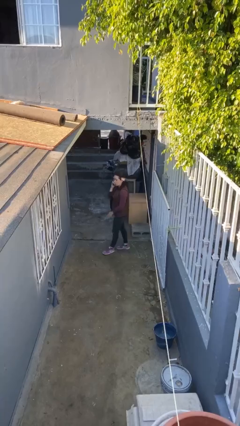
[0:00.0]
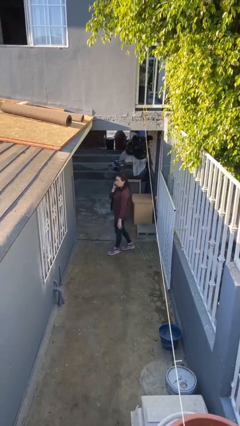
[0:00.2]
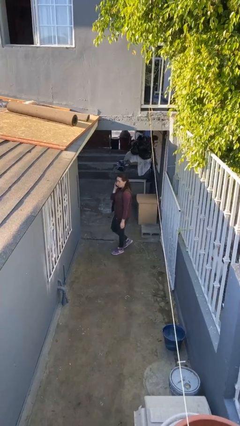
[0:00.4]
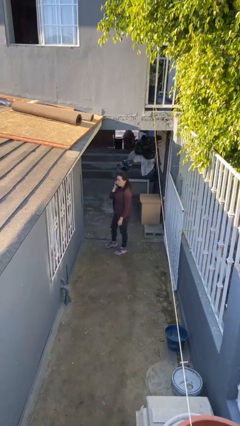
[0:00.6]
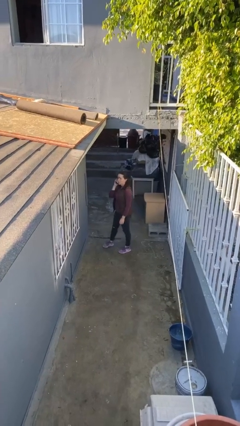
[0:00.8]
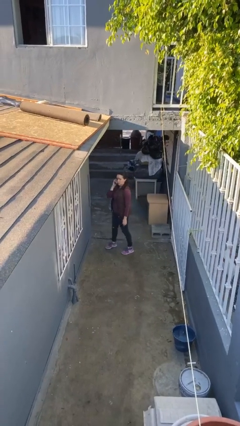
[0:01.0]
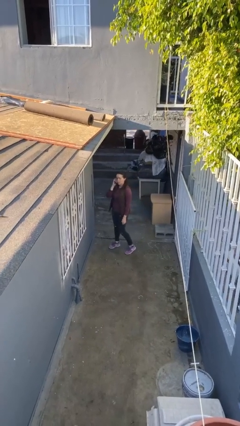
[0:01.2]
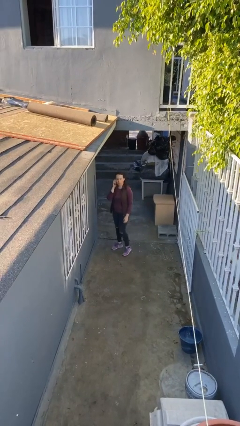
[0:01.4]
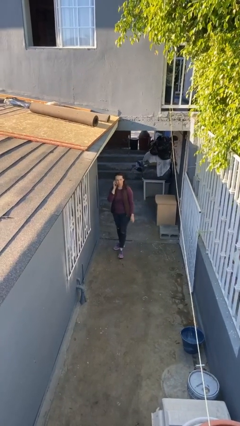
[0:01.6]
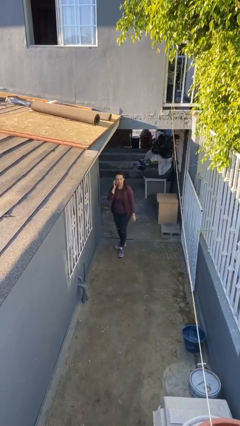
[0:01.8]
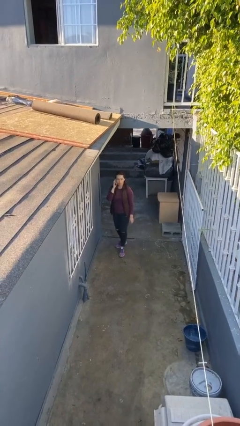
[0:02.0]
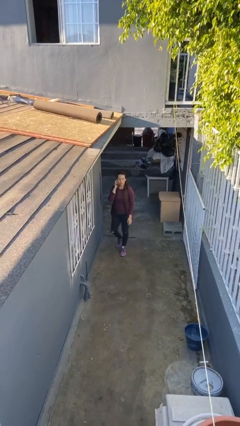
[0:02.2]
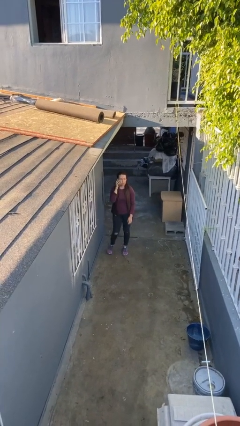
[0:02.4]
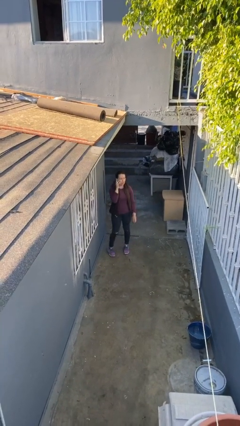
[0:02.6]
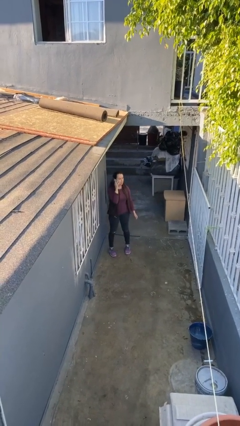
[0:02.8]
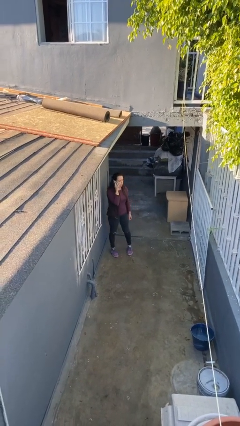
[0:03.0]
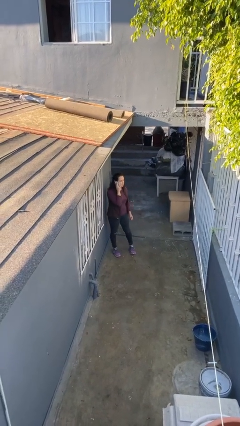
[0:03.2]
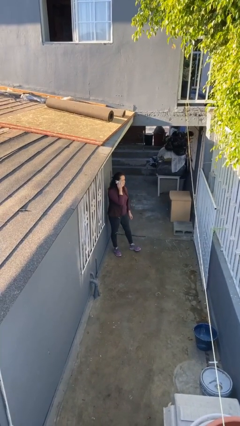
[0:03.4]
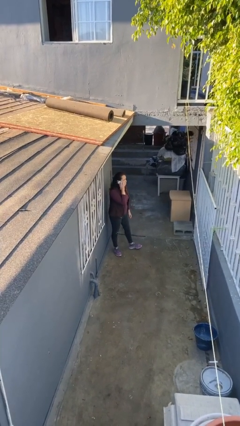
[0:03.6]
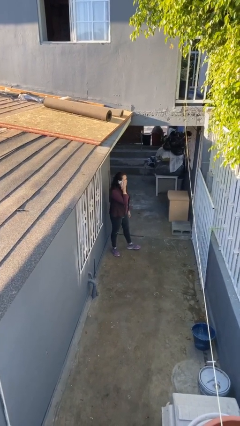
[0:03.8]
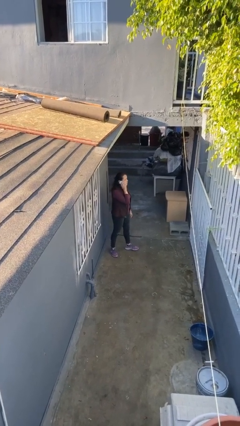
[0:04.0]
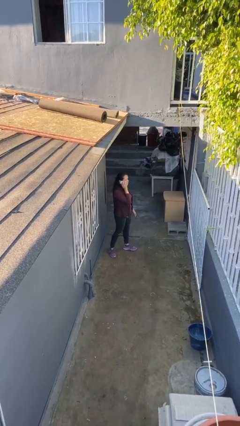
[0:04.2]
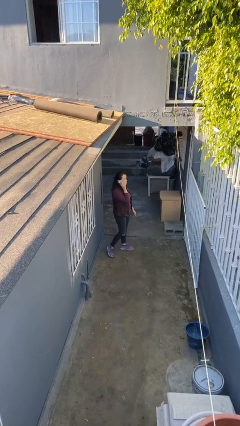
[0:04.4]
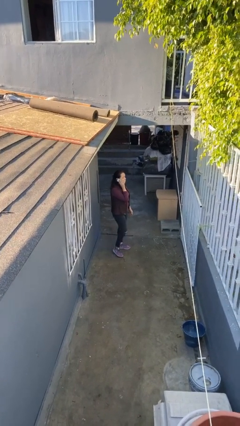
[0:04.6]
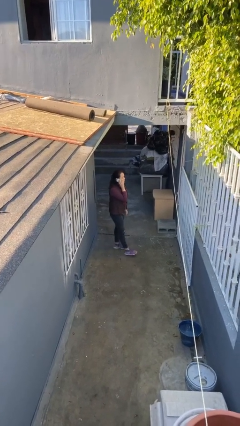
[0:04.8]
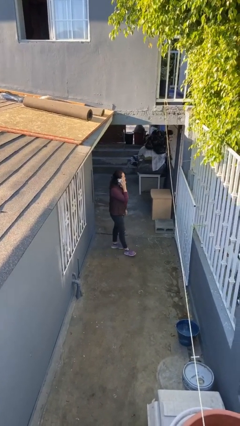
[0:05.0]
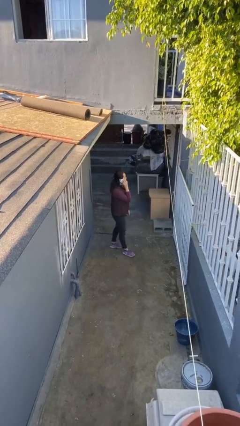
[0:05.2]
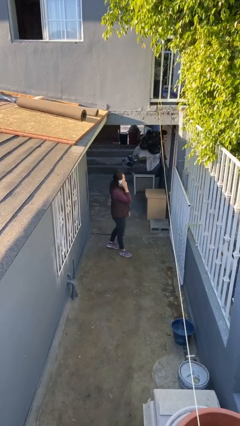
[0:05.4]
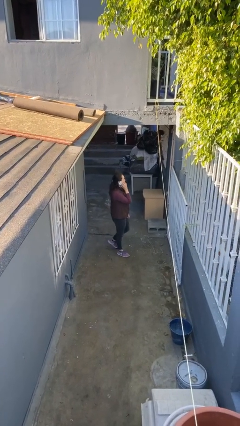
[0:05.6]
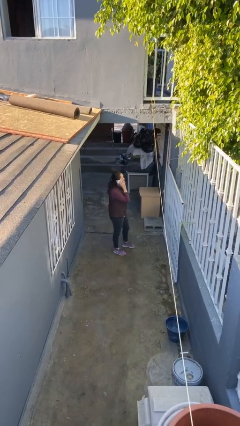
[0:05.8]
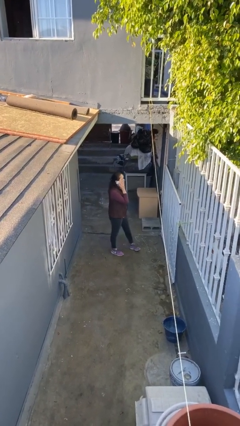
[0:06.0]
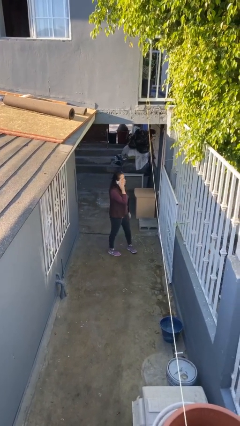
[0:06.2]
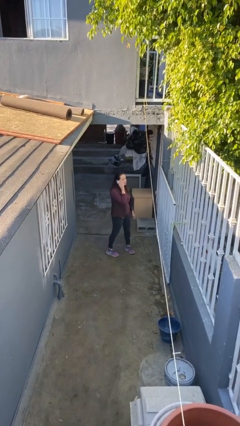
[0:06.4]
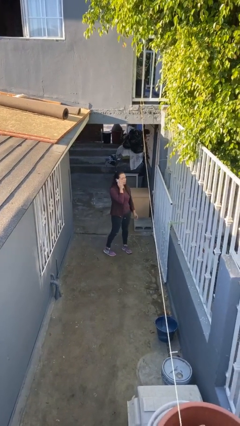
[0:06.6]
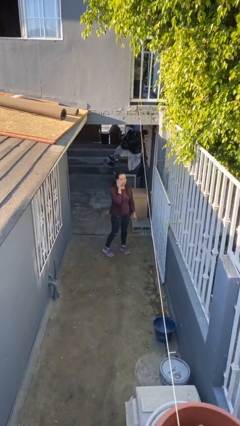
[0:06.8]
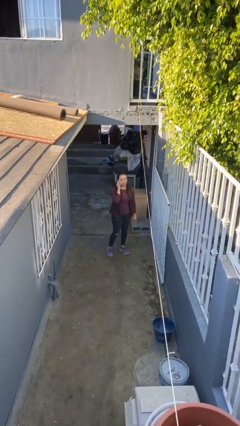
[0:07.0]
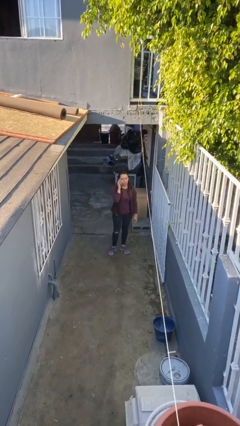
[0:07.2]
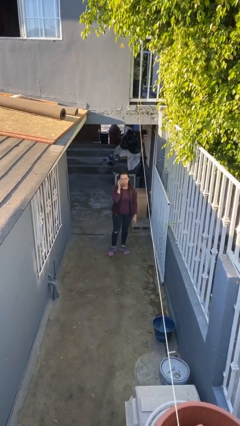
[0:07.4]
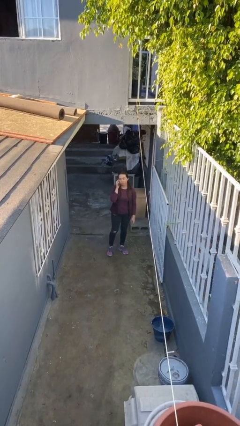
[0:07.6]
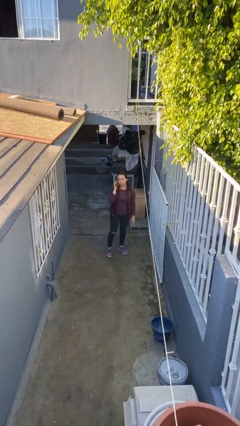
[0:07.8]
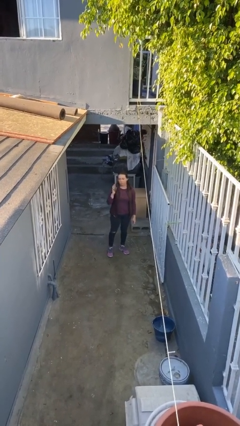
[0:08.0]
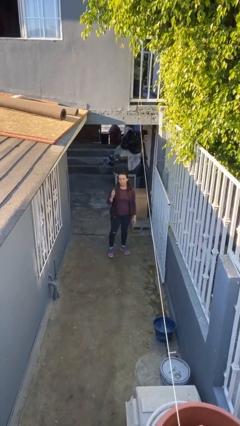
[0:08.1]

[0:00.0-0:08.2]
person talks on phone

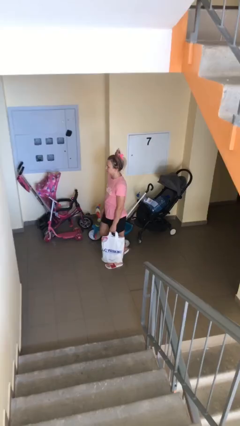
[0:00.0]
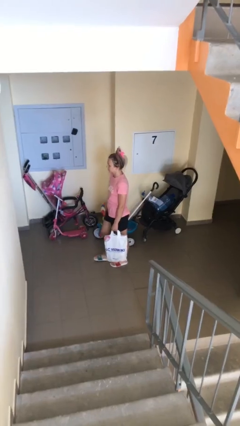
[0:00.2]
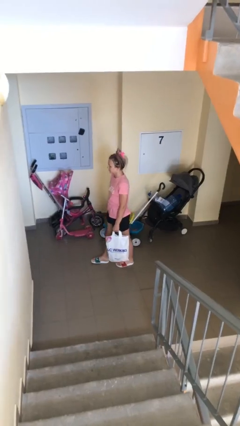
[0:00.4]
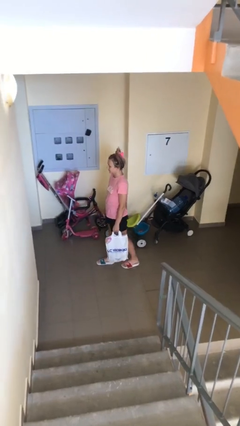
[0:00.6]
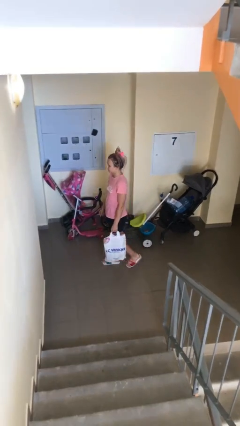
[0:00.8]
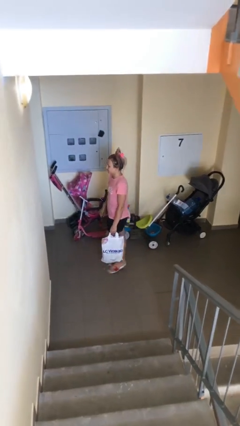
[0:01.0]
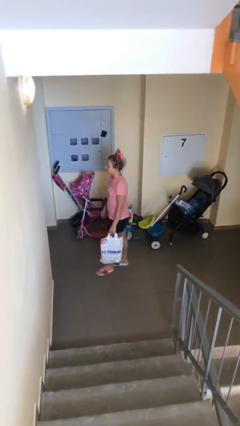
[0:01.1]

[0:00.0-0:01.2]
person carries groceries

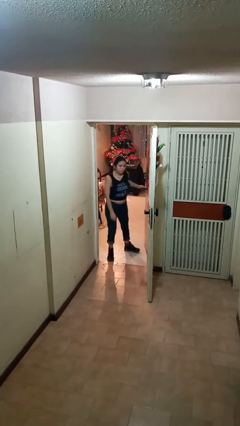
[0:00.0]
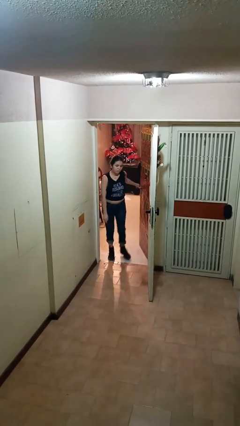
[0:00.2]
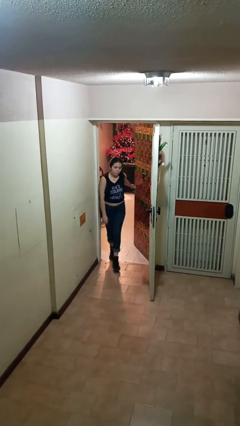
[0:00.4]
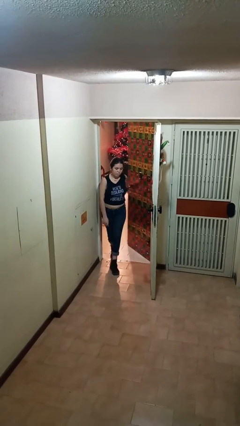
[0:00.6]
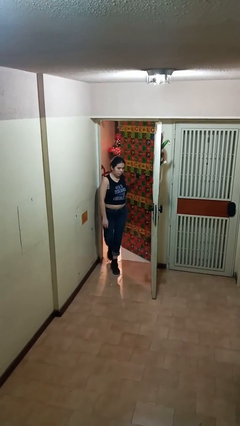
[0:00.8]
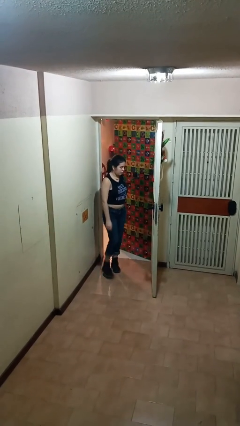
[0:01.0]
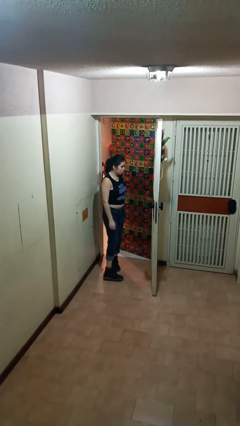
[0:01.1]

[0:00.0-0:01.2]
person closes facility door

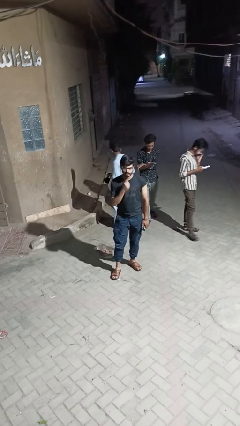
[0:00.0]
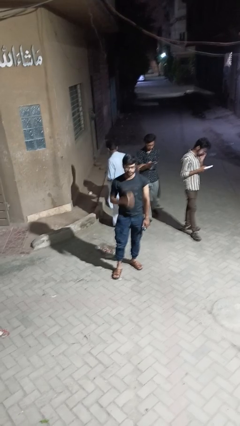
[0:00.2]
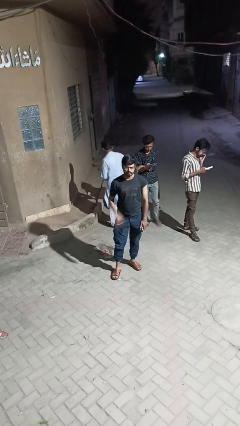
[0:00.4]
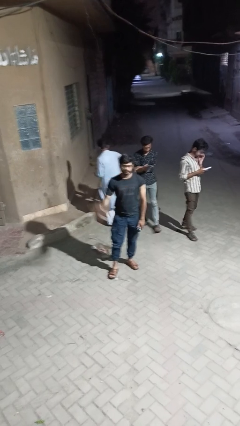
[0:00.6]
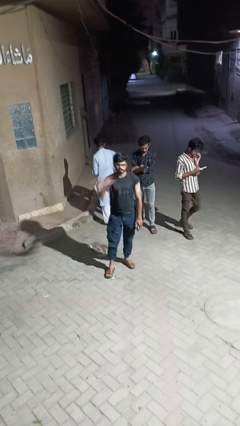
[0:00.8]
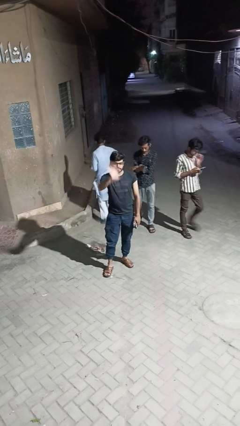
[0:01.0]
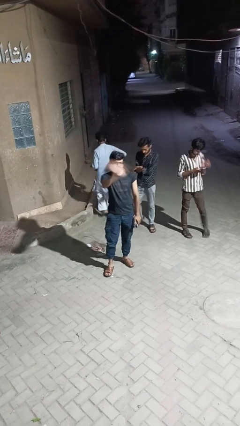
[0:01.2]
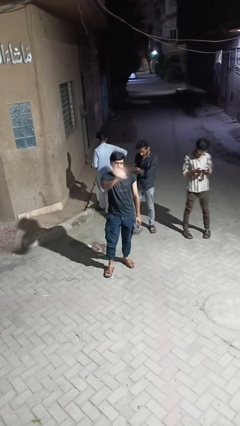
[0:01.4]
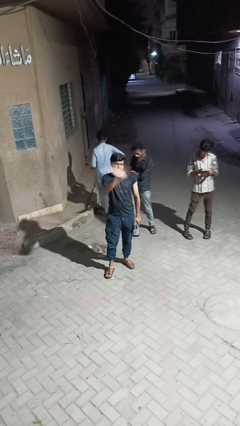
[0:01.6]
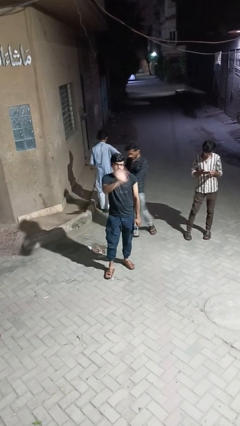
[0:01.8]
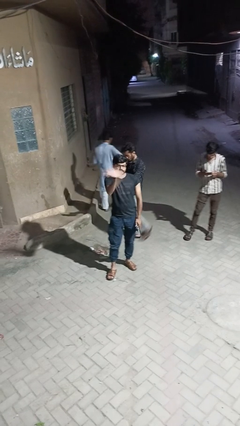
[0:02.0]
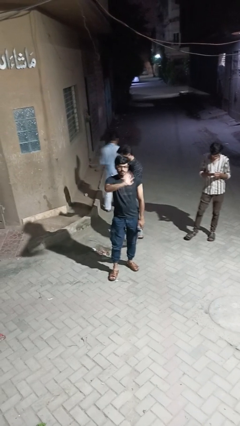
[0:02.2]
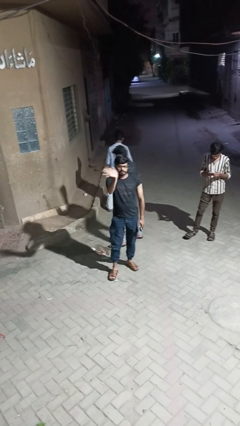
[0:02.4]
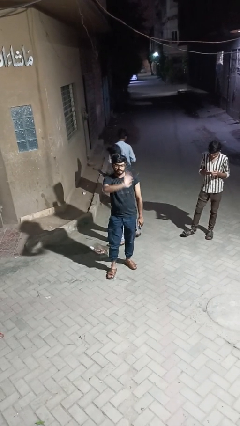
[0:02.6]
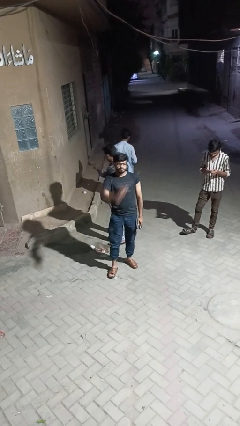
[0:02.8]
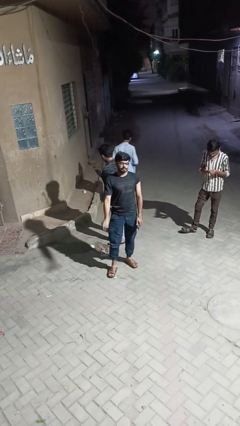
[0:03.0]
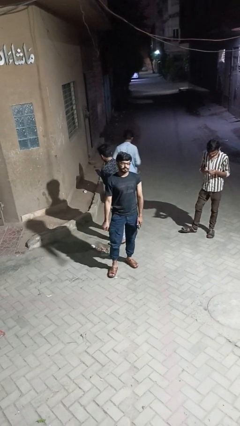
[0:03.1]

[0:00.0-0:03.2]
person waves at person

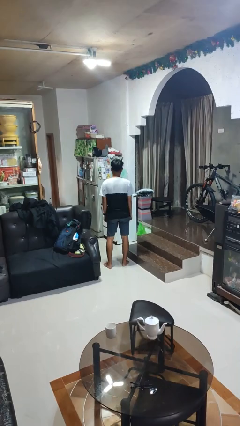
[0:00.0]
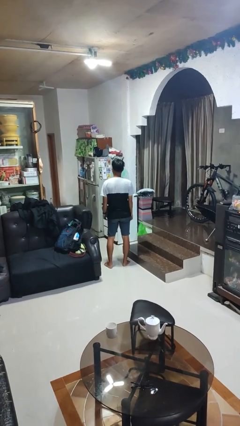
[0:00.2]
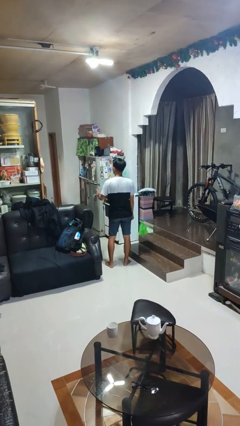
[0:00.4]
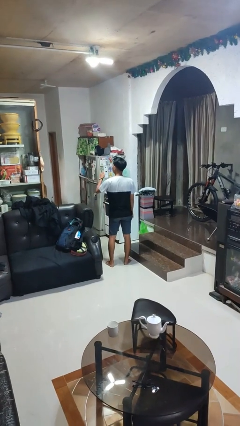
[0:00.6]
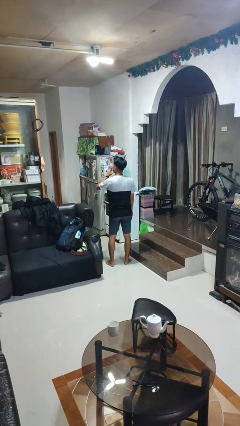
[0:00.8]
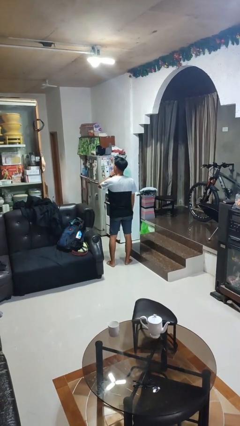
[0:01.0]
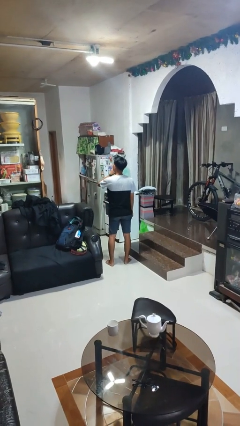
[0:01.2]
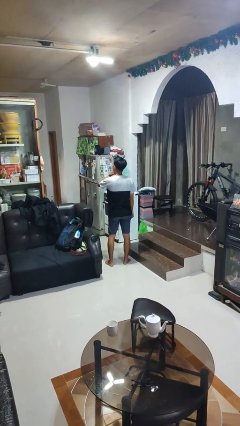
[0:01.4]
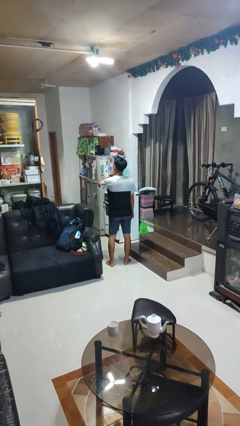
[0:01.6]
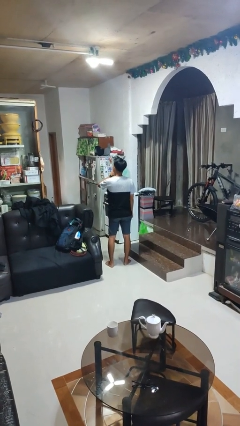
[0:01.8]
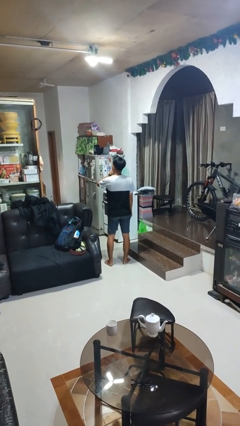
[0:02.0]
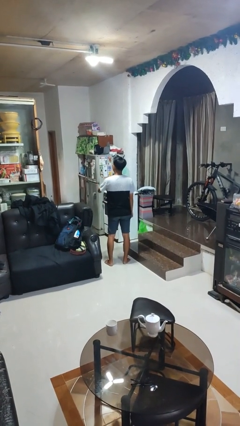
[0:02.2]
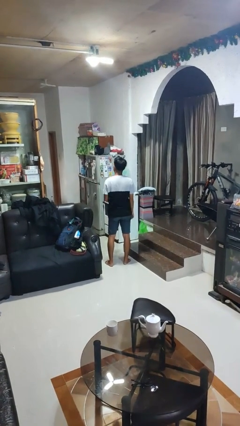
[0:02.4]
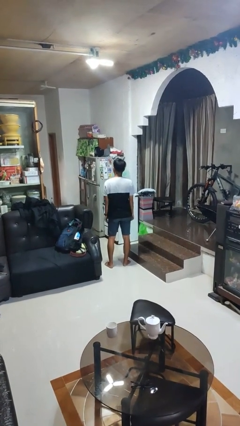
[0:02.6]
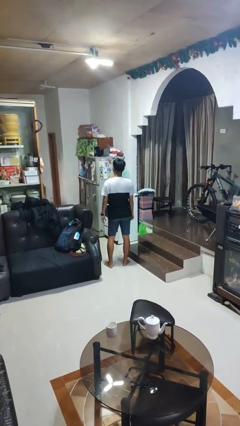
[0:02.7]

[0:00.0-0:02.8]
person gestures behind me

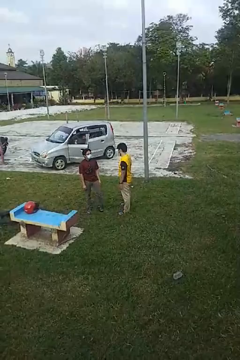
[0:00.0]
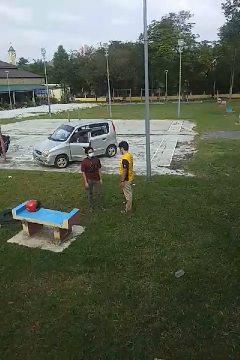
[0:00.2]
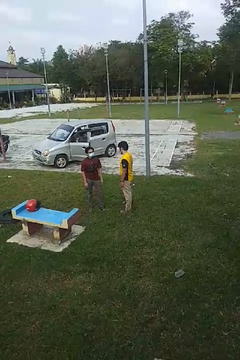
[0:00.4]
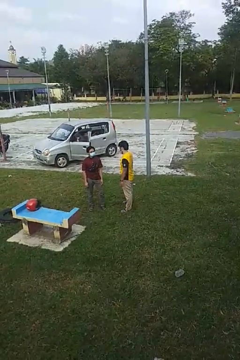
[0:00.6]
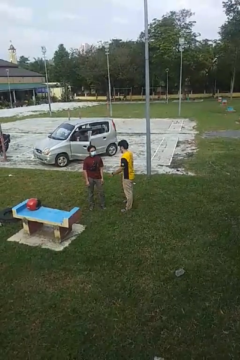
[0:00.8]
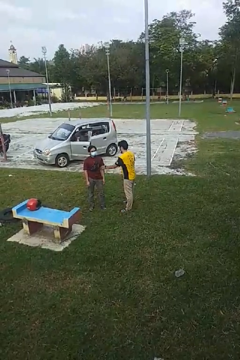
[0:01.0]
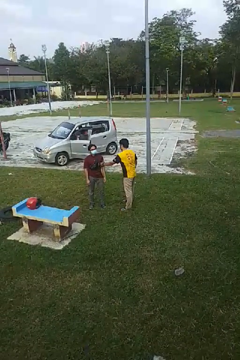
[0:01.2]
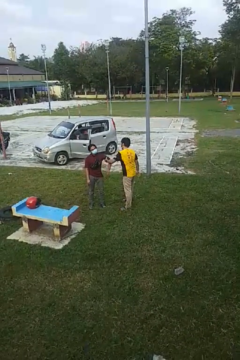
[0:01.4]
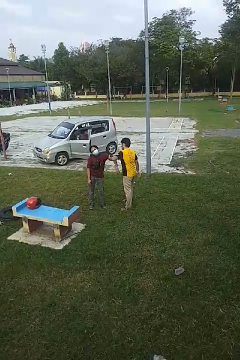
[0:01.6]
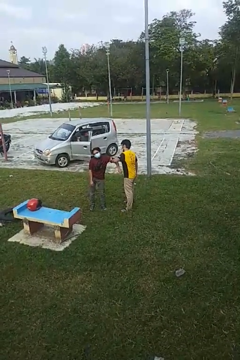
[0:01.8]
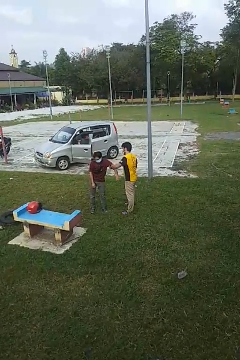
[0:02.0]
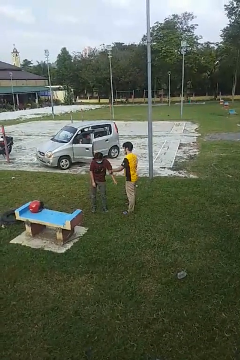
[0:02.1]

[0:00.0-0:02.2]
person grabs person by bicep
